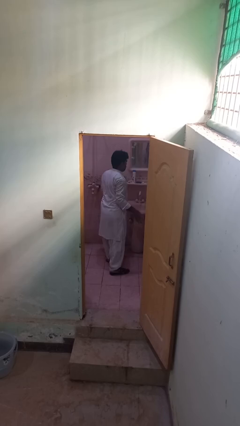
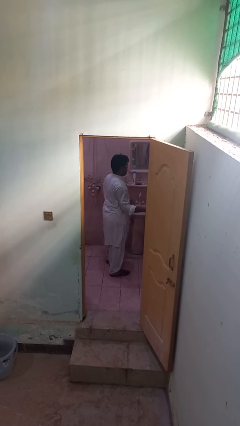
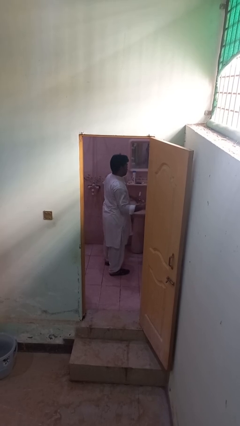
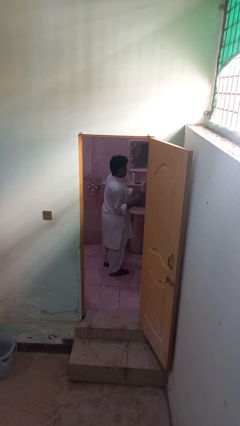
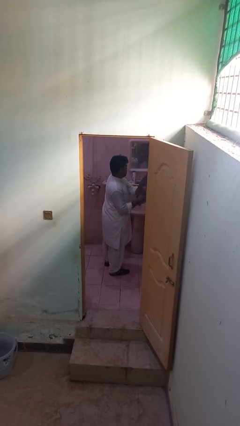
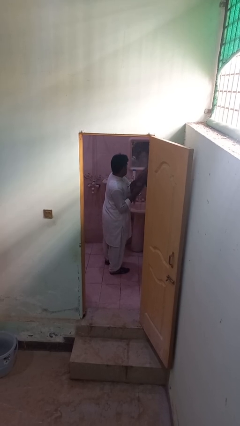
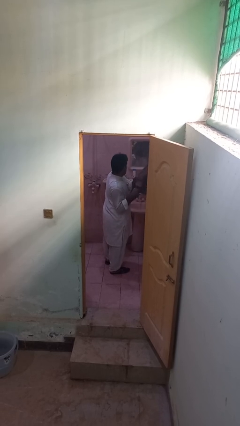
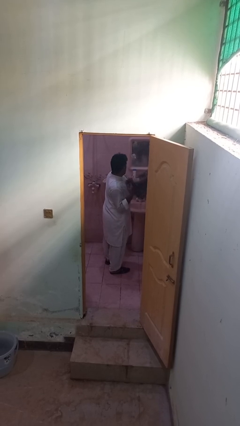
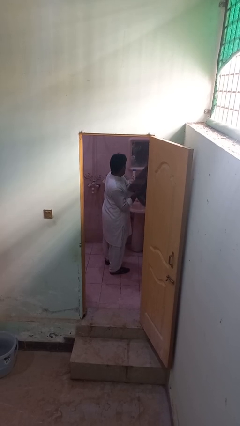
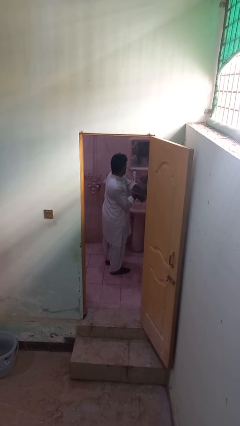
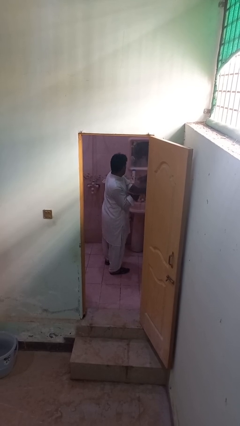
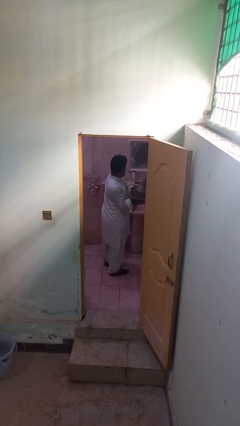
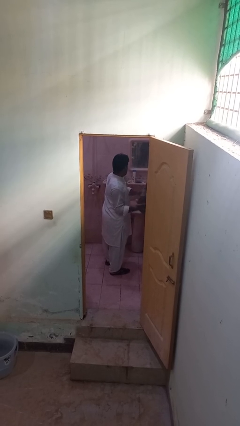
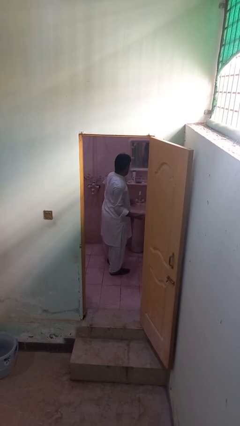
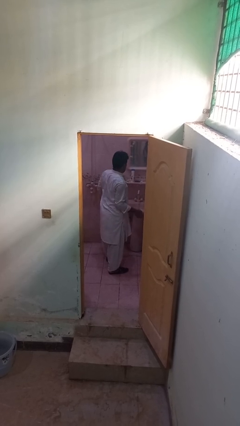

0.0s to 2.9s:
person dries hands with towel

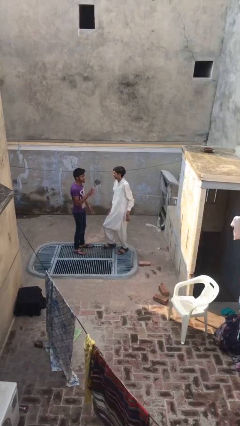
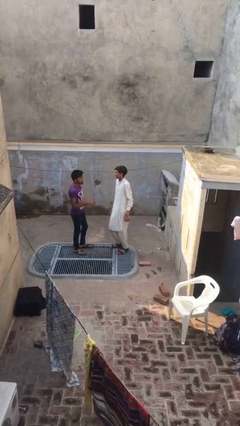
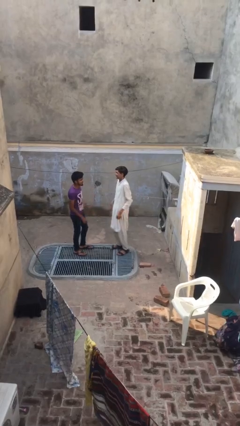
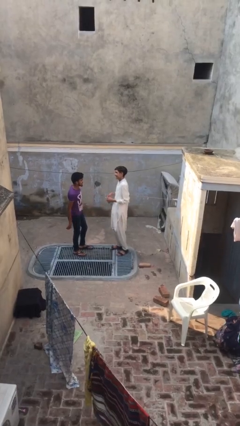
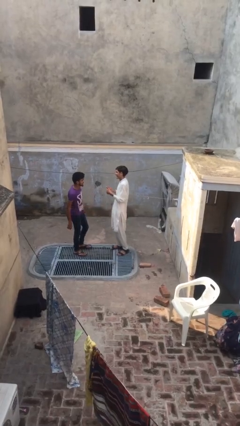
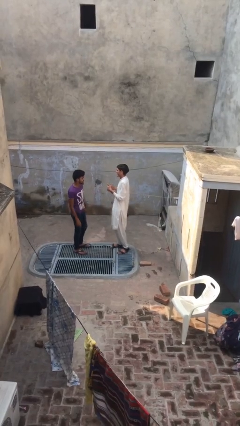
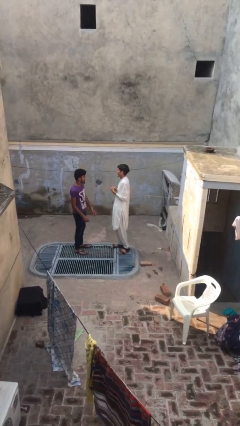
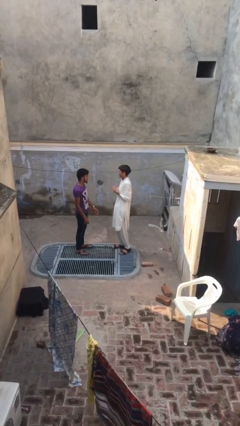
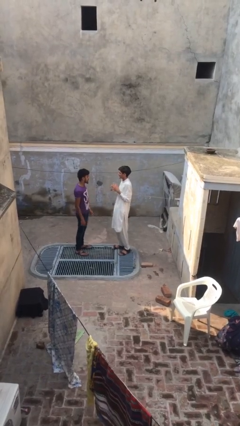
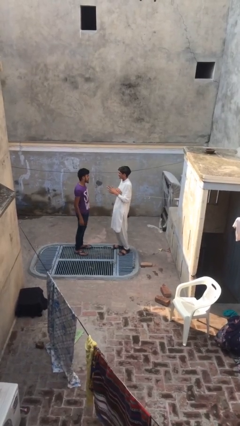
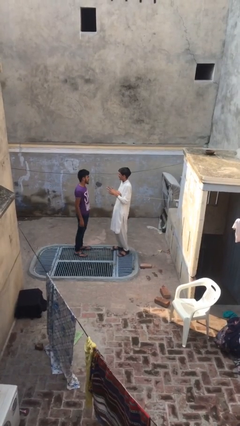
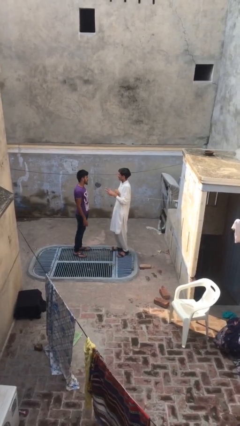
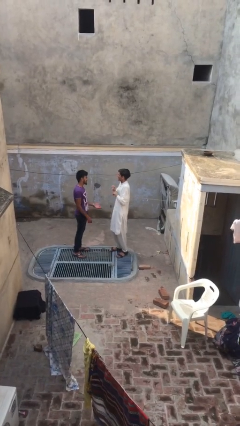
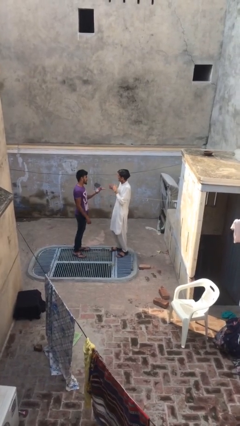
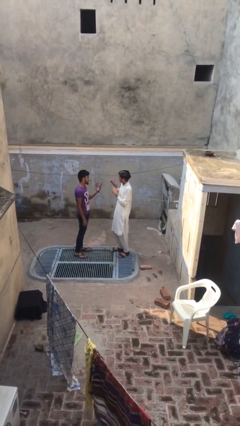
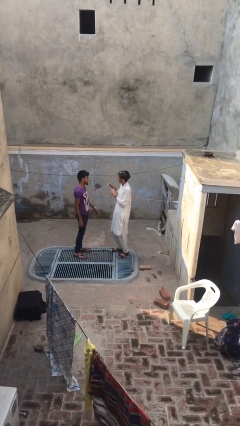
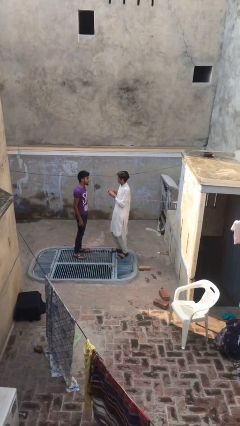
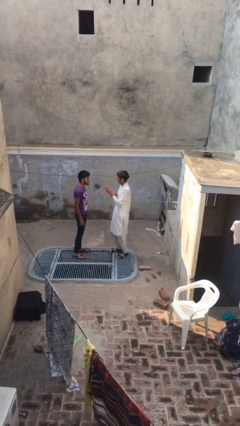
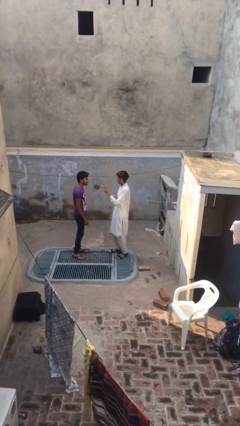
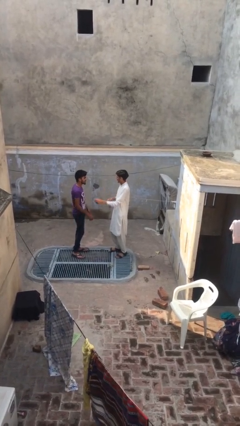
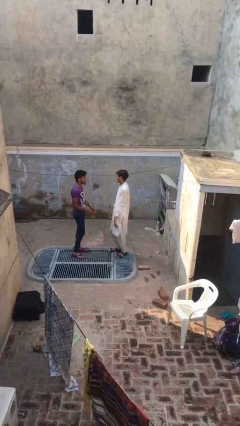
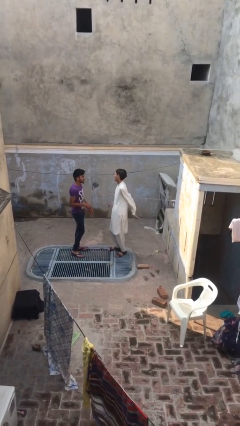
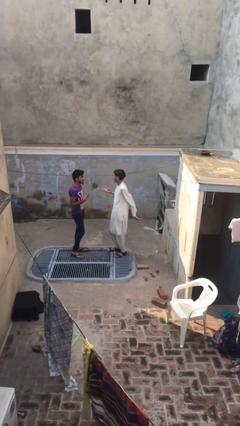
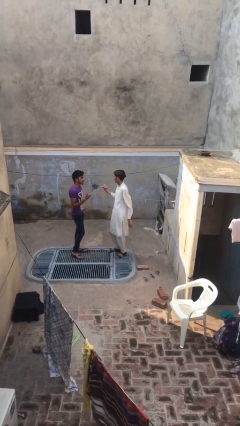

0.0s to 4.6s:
person talks to person

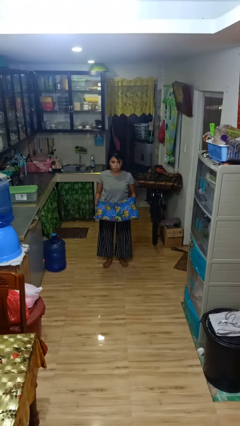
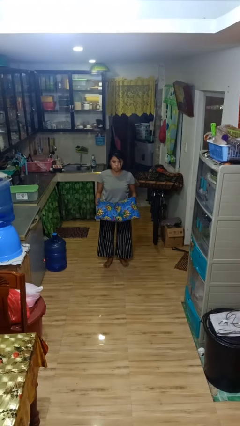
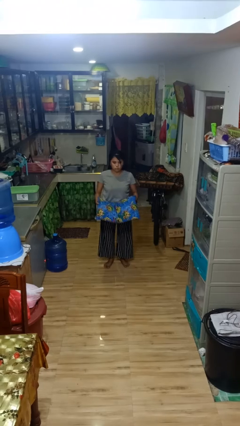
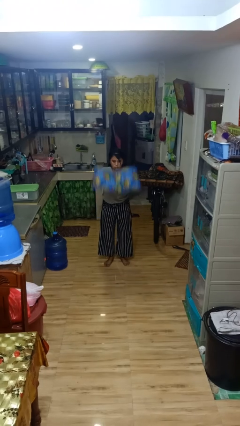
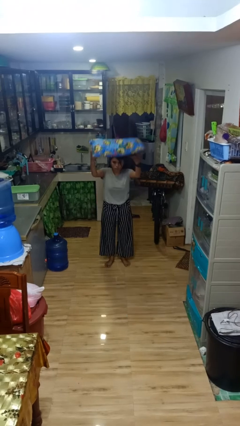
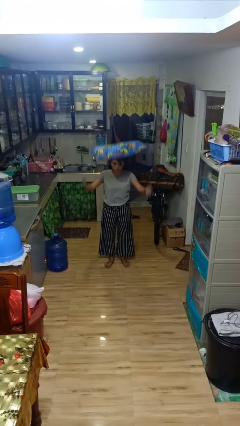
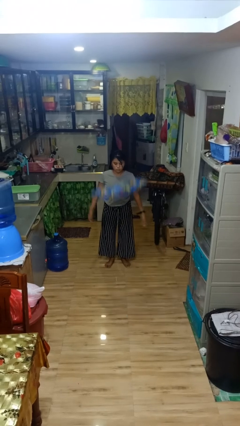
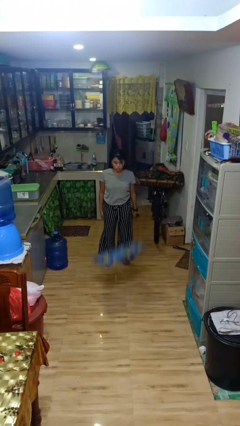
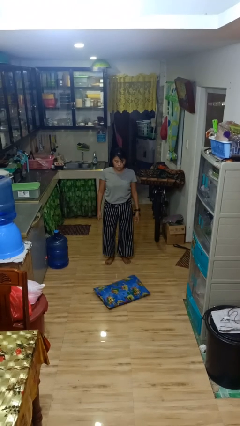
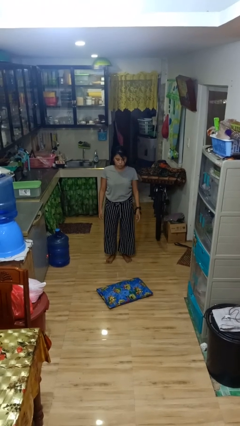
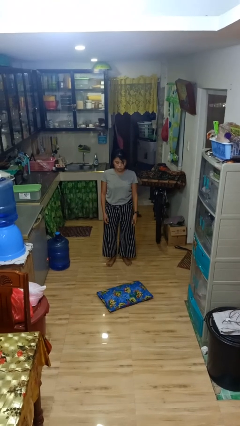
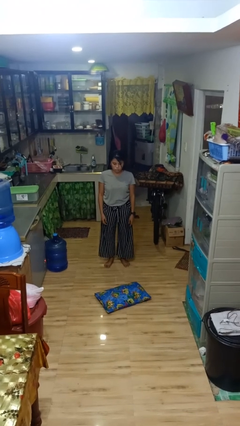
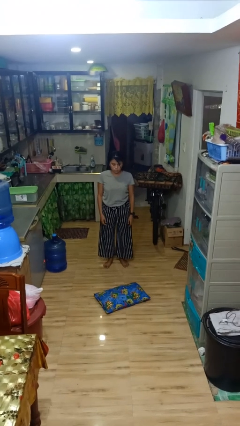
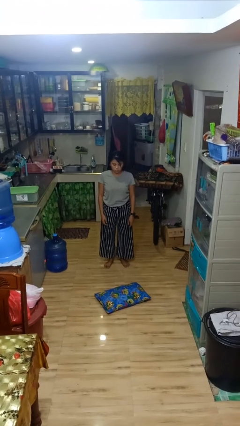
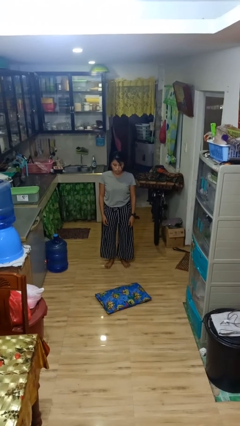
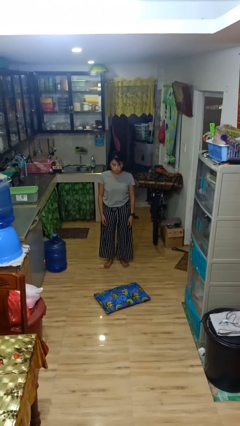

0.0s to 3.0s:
person throws object into air

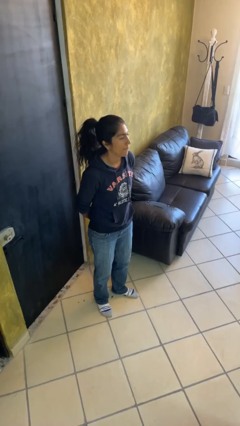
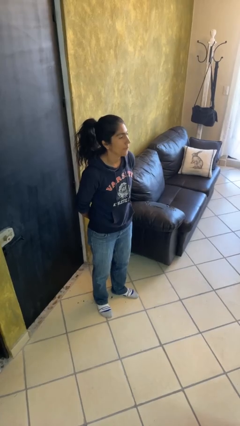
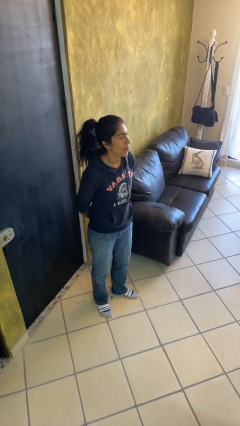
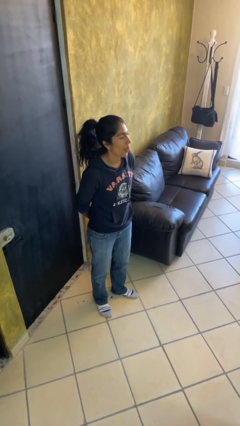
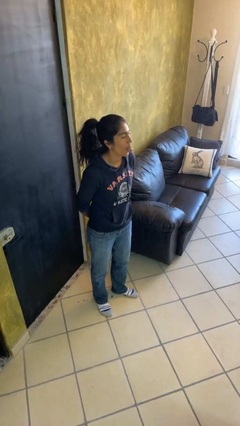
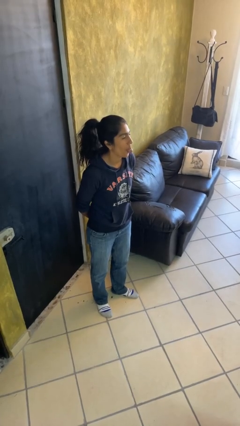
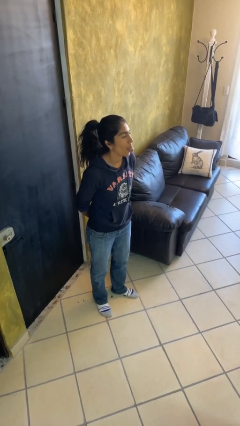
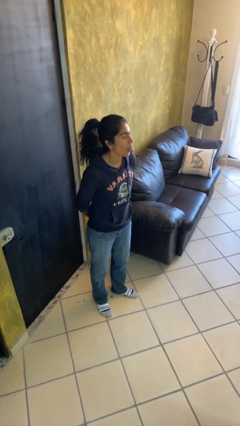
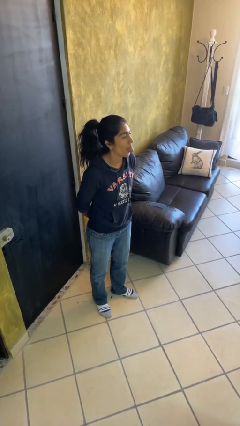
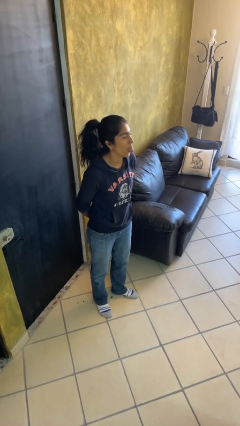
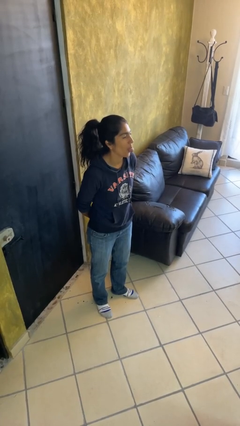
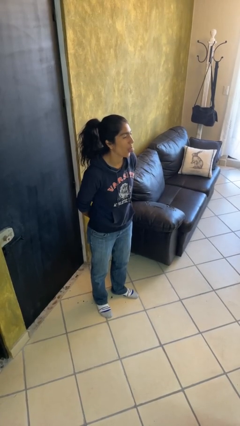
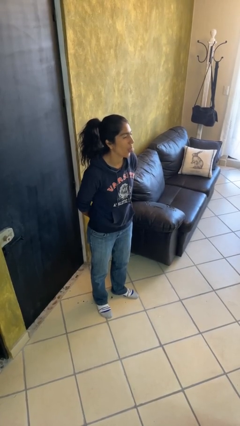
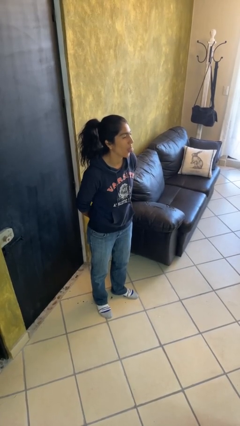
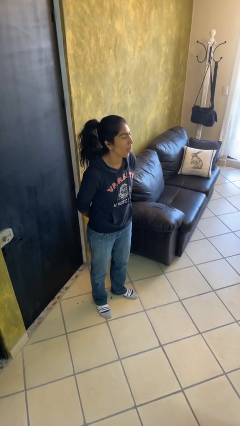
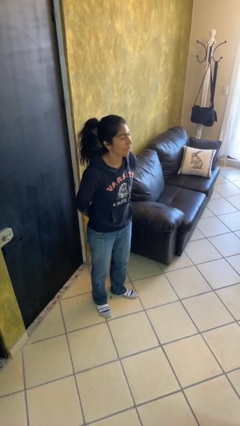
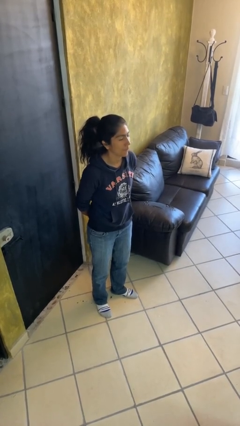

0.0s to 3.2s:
person sticks out tongue

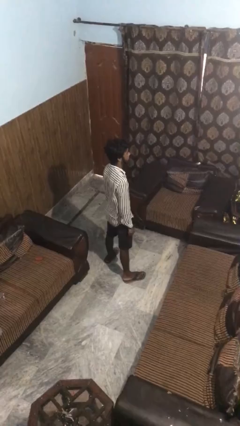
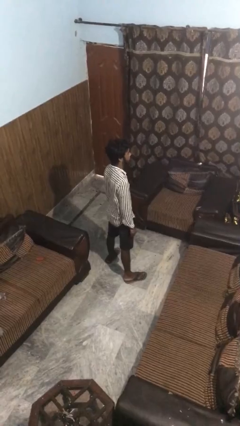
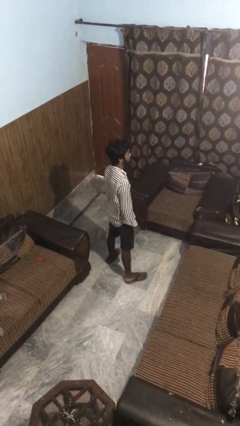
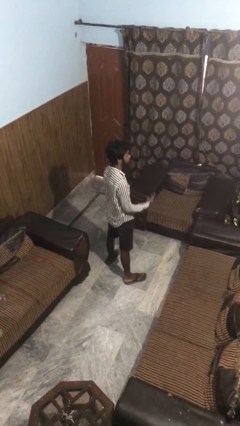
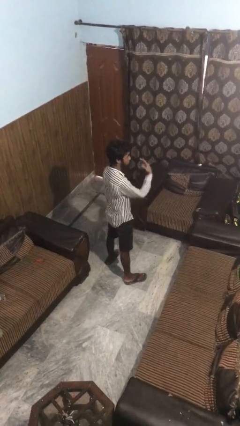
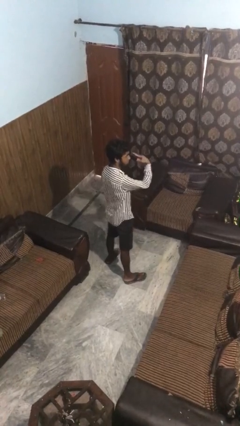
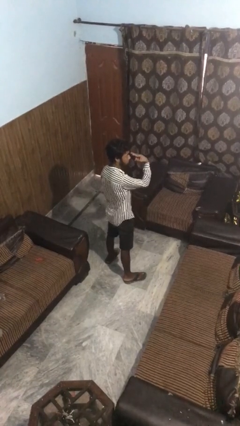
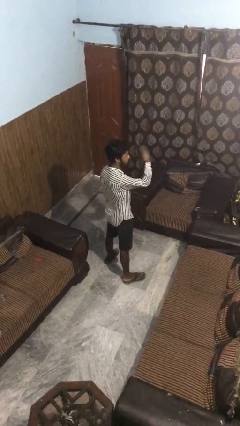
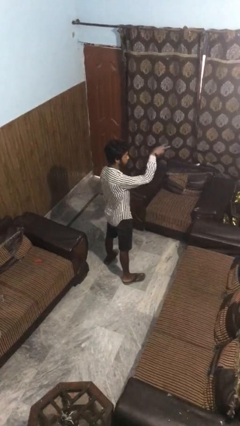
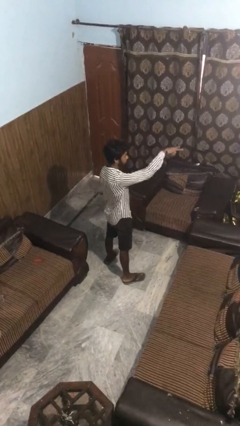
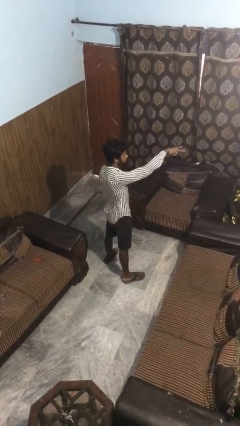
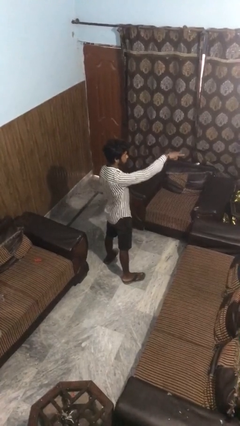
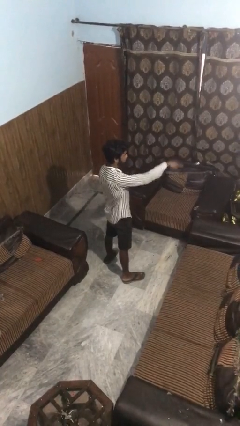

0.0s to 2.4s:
person gestures watch closely

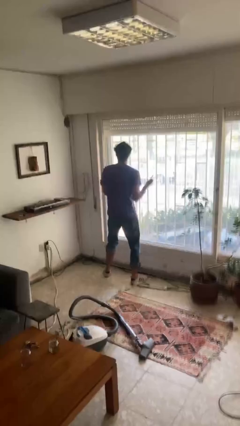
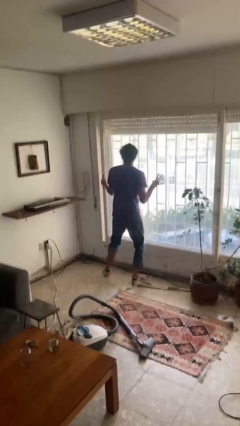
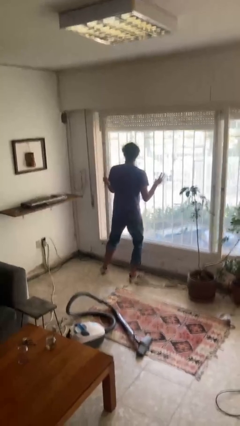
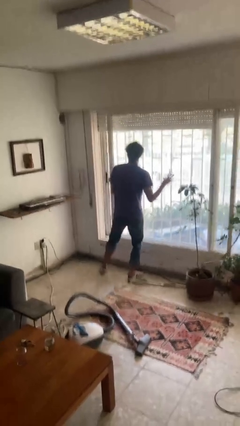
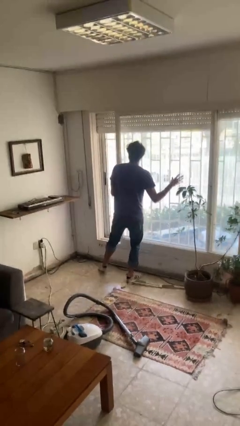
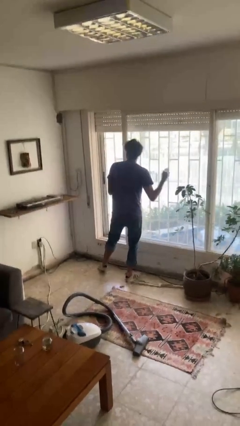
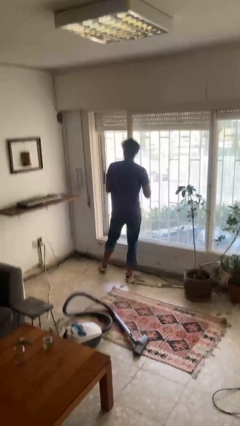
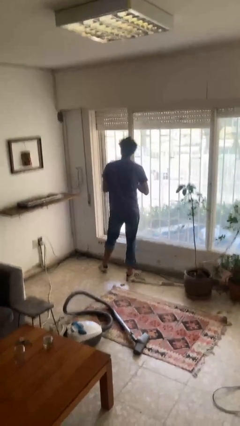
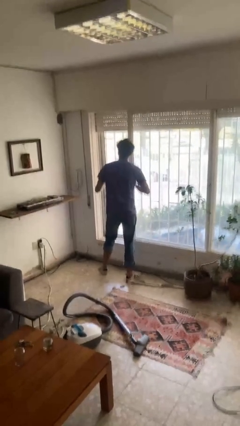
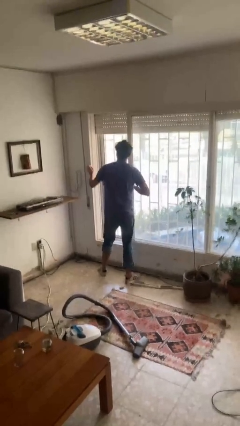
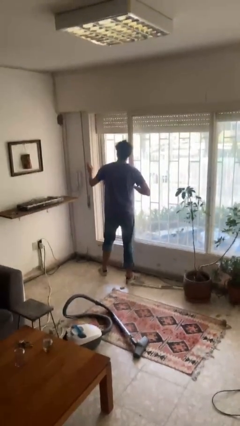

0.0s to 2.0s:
person opens sliding door
